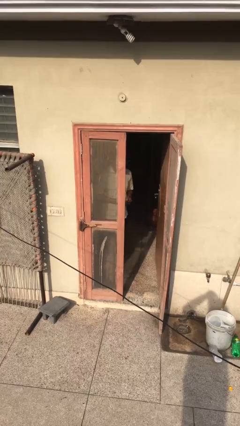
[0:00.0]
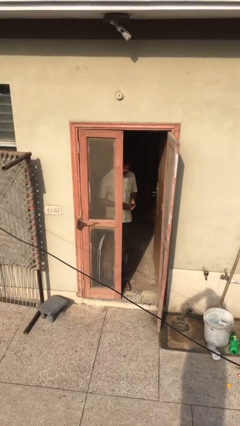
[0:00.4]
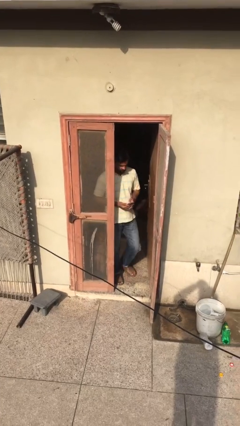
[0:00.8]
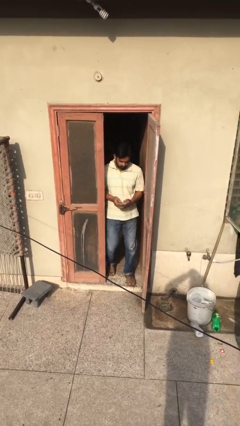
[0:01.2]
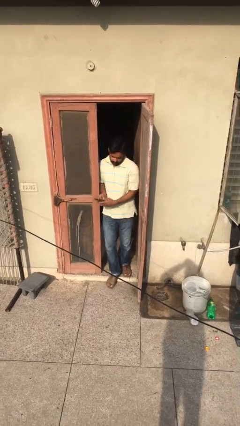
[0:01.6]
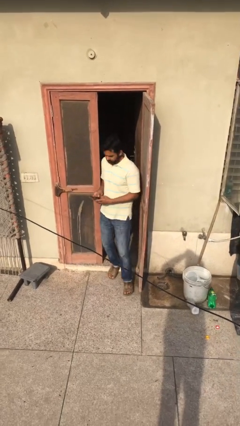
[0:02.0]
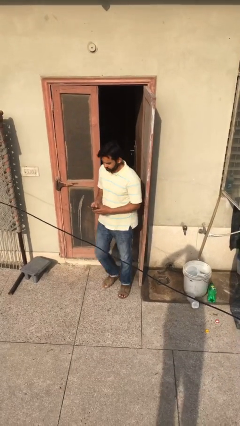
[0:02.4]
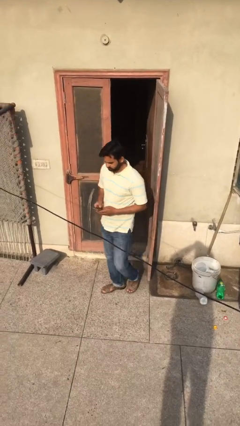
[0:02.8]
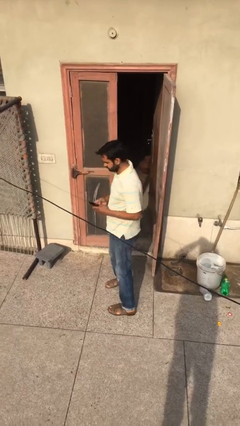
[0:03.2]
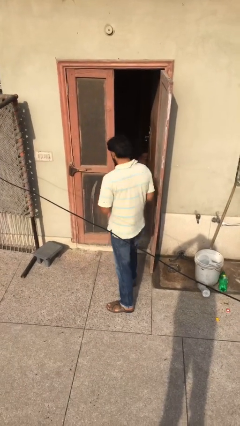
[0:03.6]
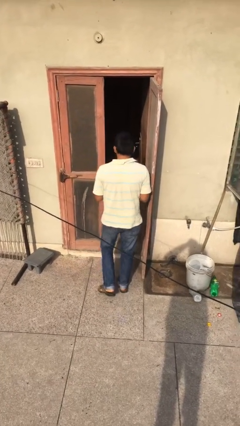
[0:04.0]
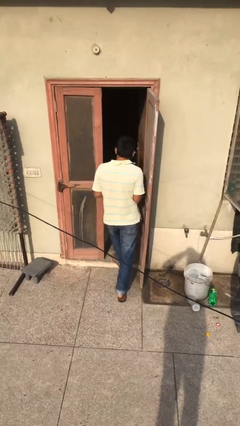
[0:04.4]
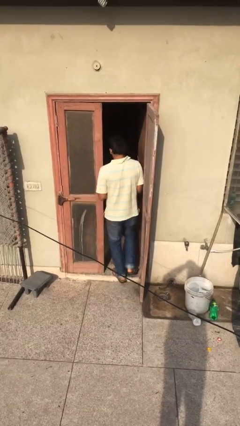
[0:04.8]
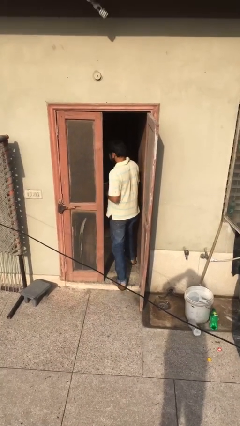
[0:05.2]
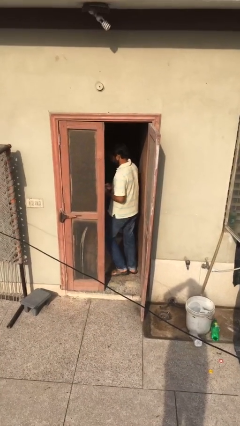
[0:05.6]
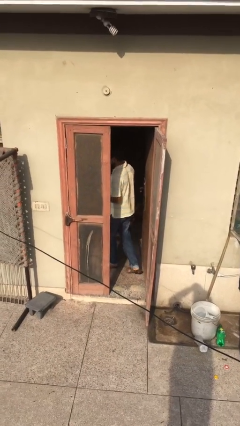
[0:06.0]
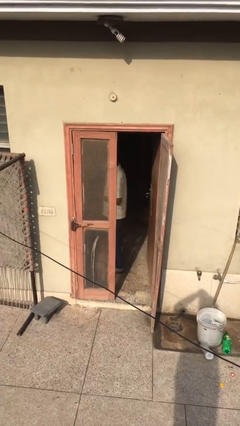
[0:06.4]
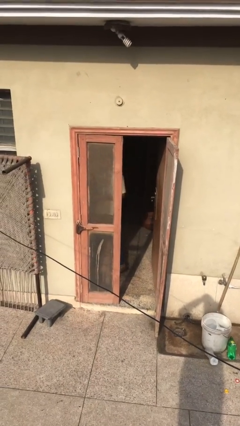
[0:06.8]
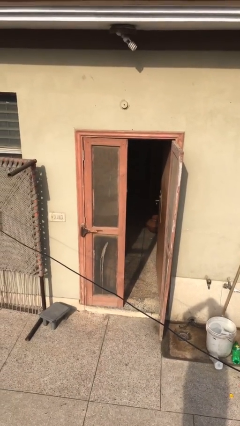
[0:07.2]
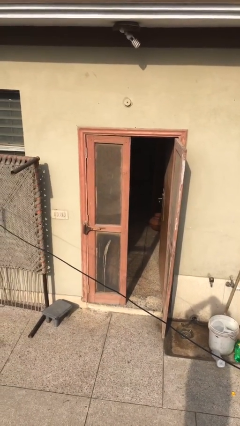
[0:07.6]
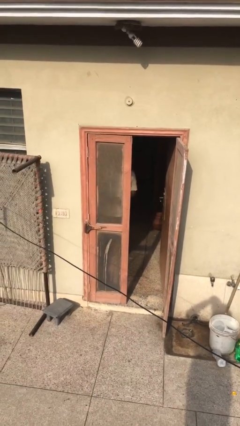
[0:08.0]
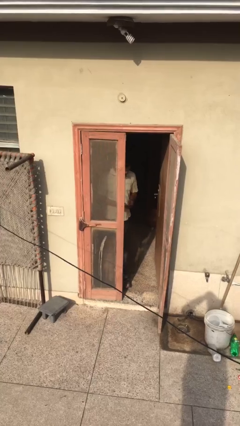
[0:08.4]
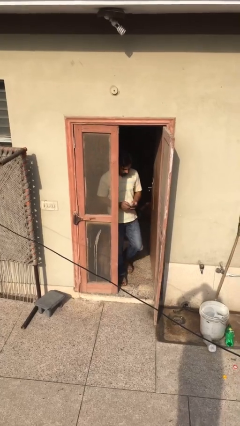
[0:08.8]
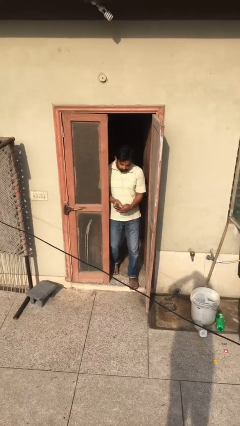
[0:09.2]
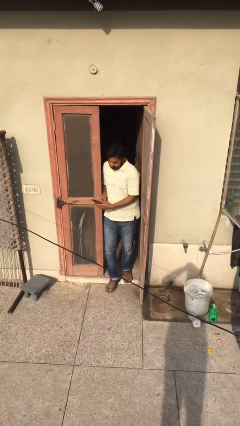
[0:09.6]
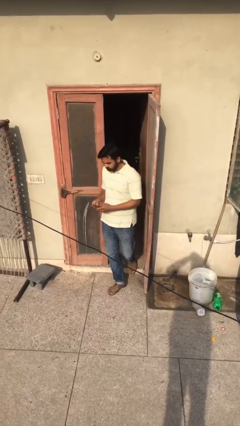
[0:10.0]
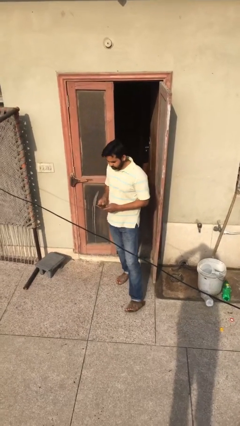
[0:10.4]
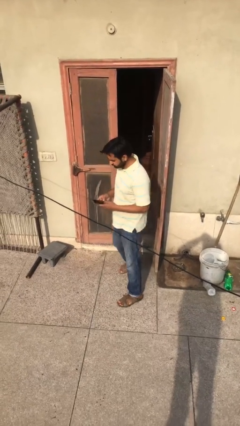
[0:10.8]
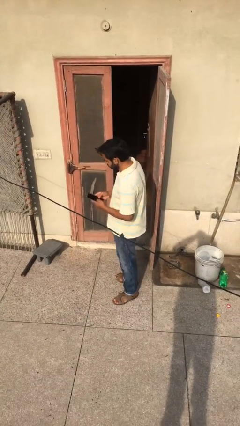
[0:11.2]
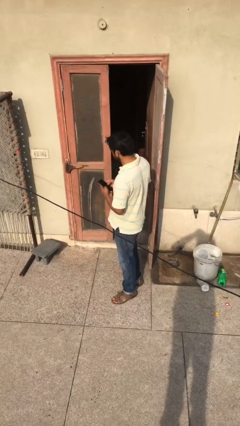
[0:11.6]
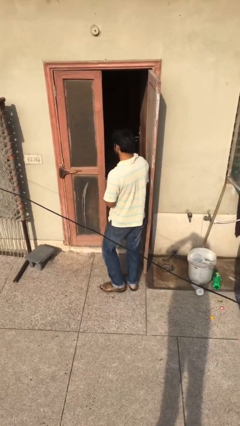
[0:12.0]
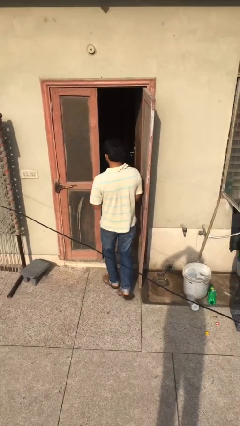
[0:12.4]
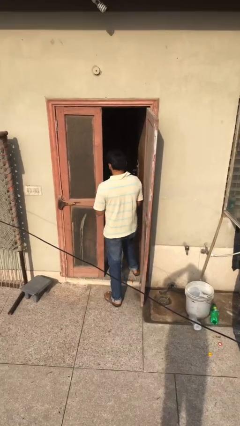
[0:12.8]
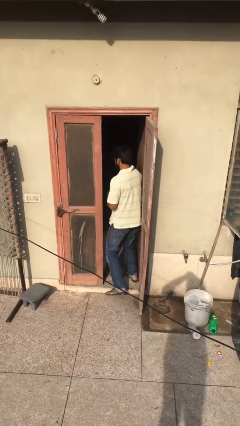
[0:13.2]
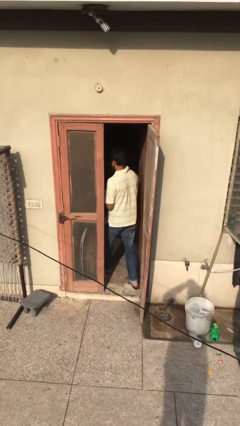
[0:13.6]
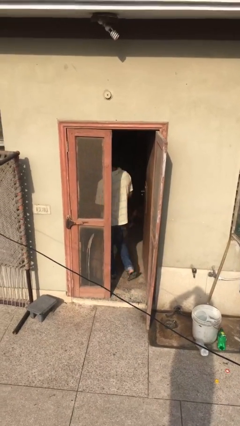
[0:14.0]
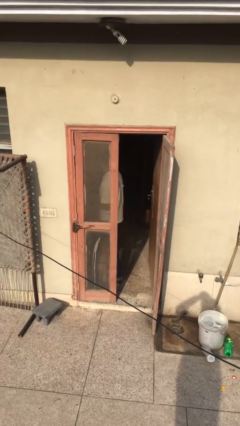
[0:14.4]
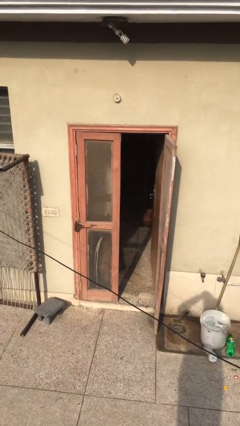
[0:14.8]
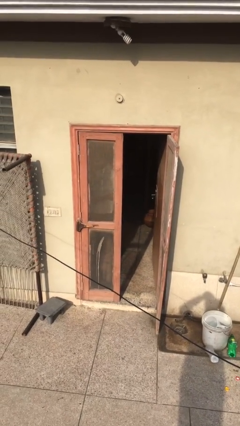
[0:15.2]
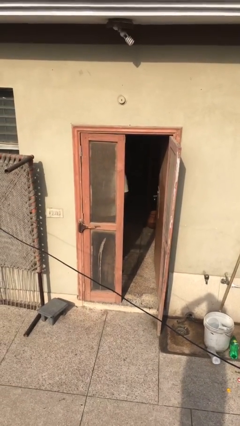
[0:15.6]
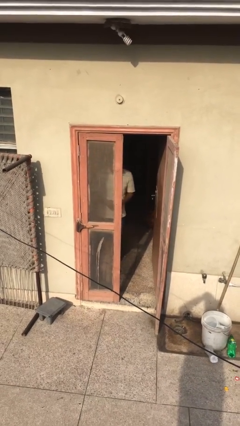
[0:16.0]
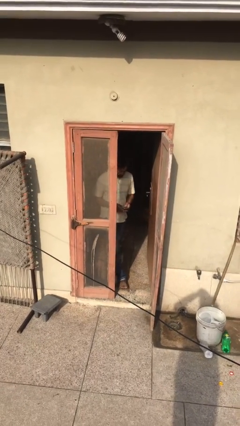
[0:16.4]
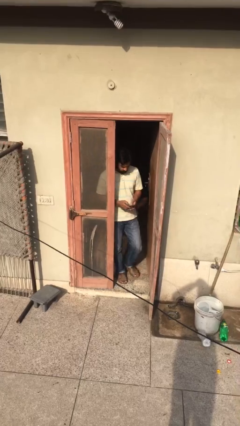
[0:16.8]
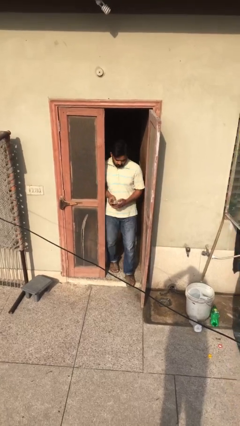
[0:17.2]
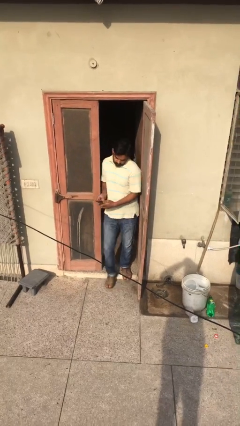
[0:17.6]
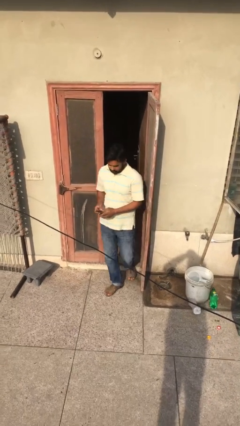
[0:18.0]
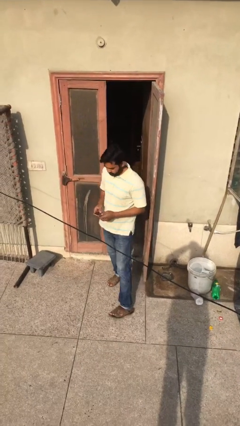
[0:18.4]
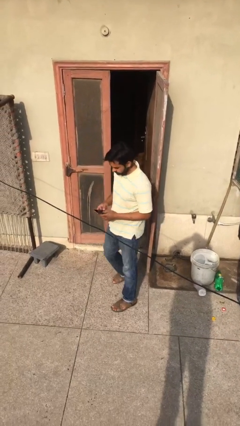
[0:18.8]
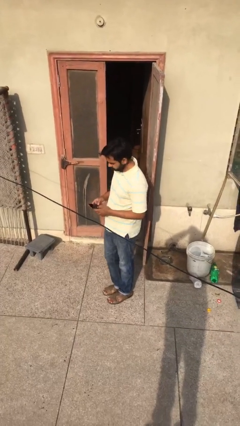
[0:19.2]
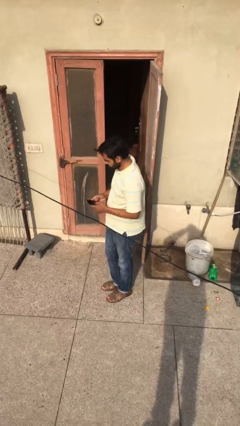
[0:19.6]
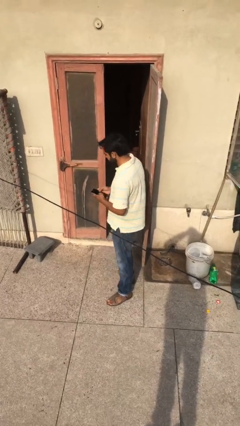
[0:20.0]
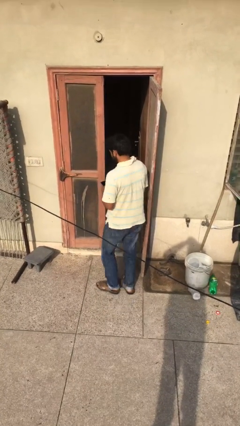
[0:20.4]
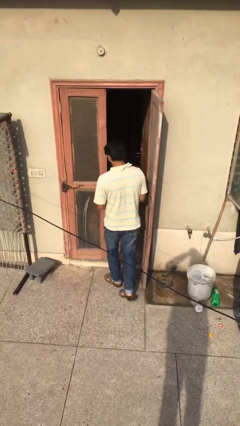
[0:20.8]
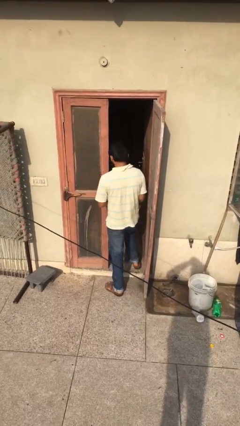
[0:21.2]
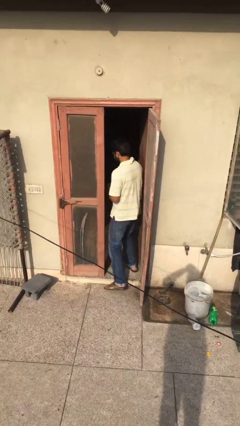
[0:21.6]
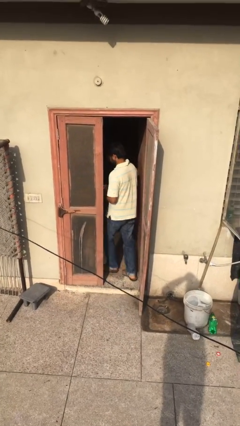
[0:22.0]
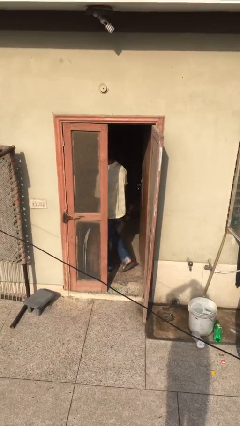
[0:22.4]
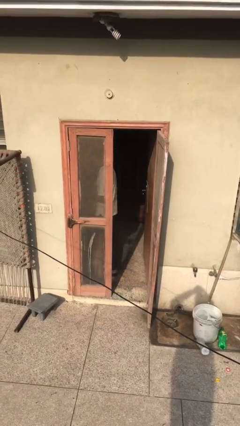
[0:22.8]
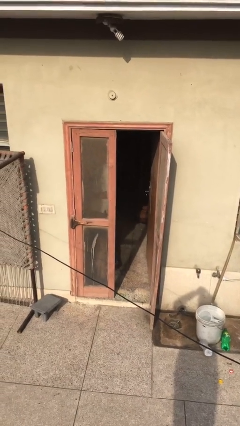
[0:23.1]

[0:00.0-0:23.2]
person texts on phone

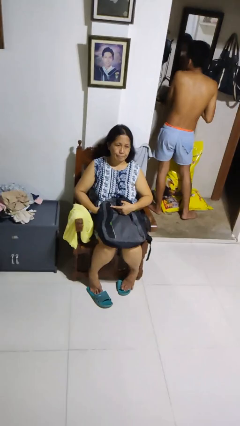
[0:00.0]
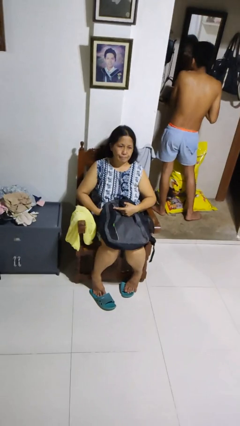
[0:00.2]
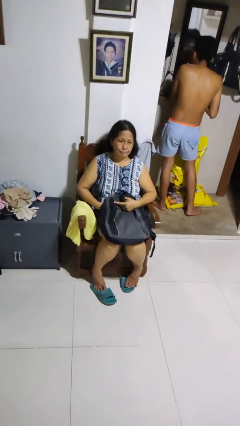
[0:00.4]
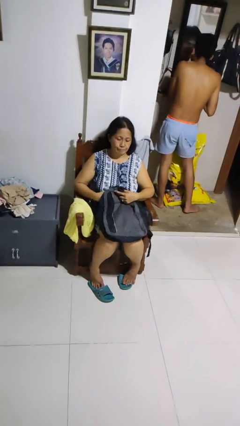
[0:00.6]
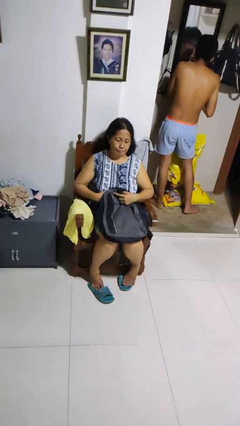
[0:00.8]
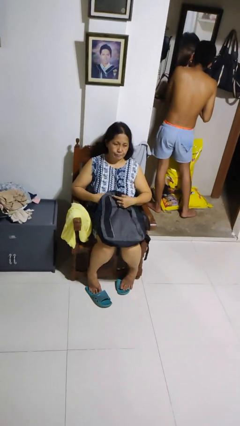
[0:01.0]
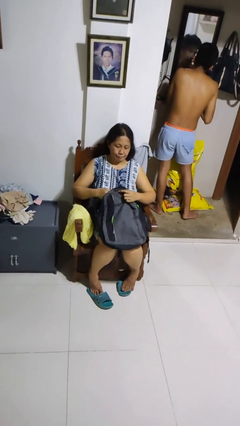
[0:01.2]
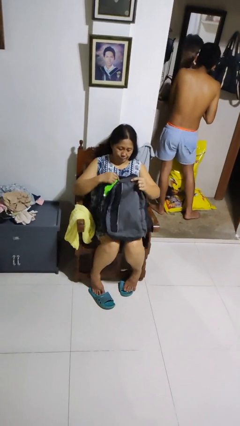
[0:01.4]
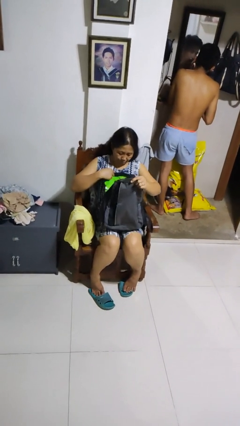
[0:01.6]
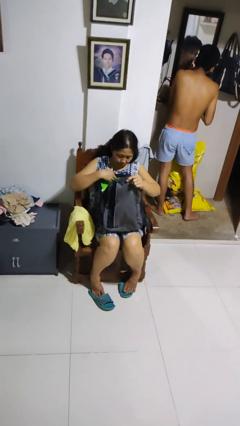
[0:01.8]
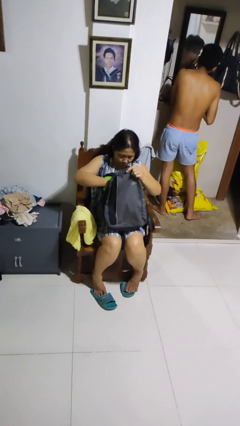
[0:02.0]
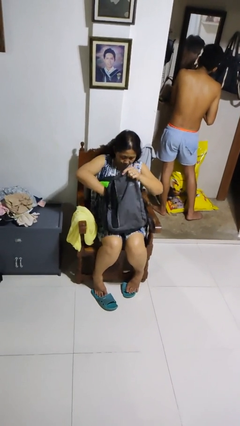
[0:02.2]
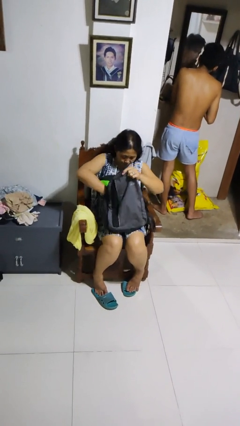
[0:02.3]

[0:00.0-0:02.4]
person searches in backpack

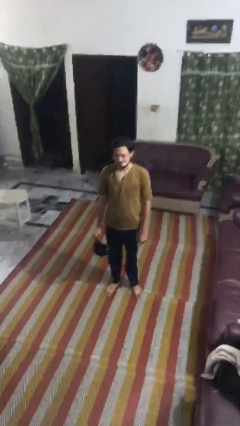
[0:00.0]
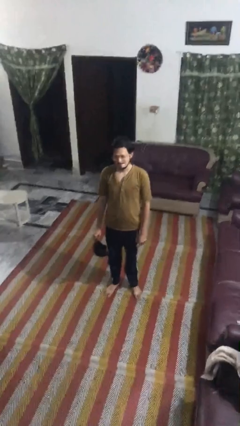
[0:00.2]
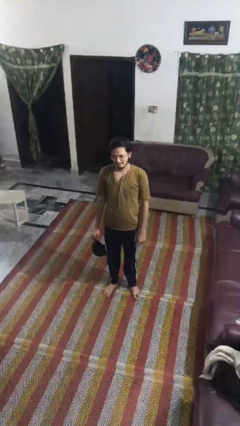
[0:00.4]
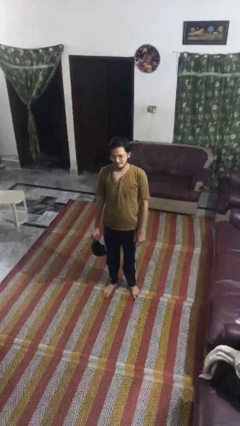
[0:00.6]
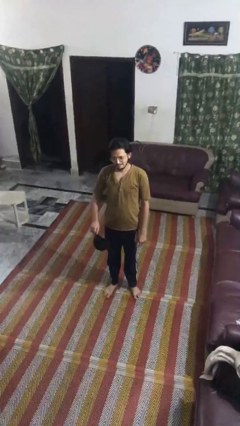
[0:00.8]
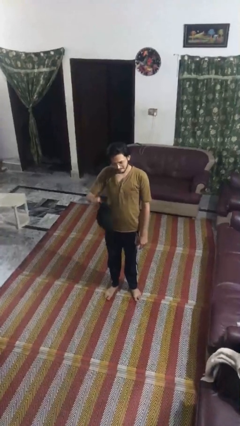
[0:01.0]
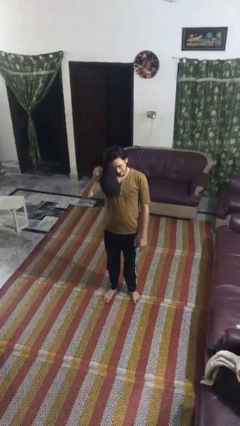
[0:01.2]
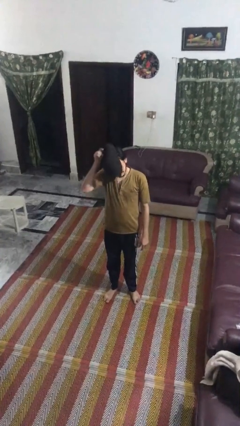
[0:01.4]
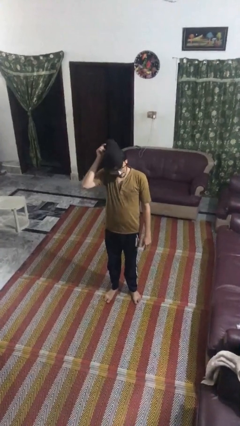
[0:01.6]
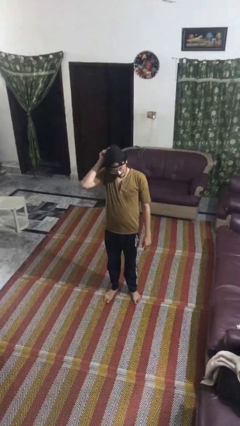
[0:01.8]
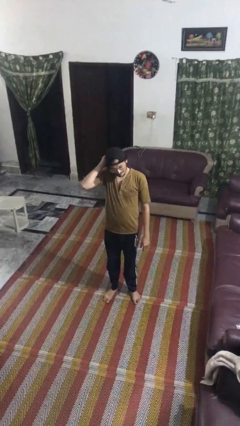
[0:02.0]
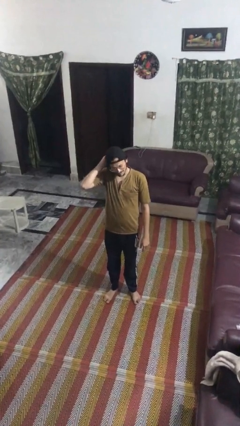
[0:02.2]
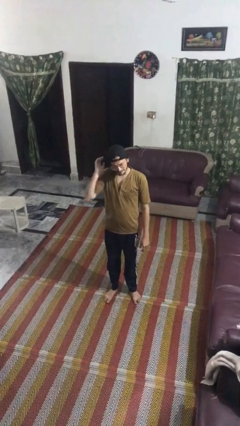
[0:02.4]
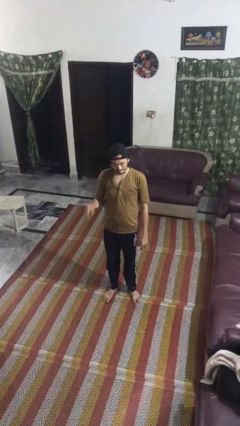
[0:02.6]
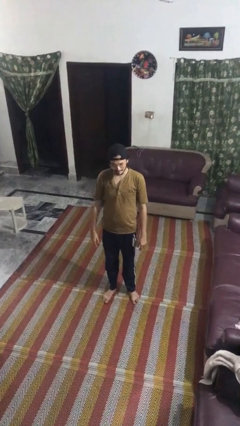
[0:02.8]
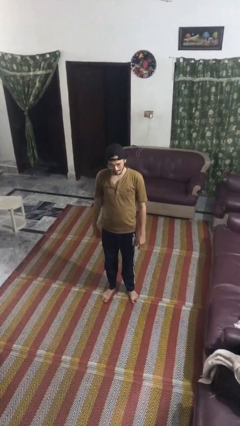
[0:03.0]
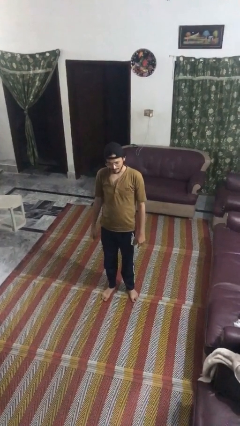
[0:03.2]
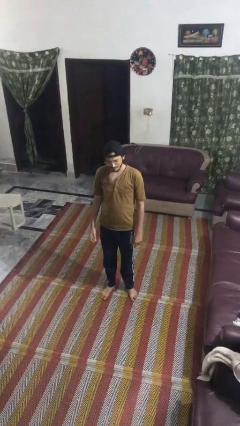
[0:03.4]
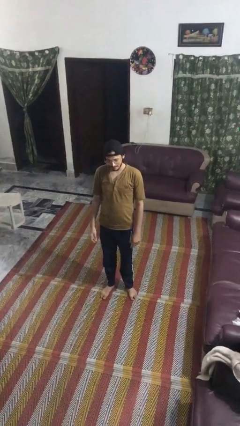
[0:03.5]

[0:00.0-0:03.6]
person puts on hat
